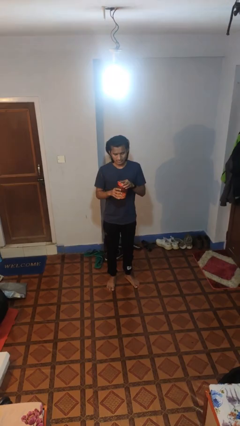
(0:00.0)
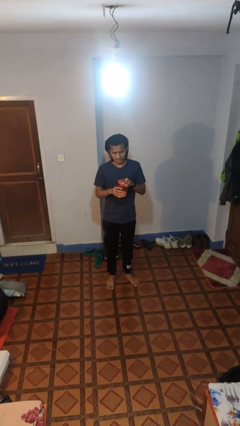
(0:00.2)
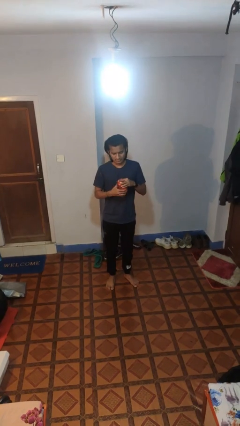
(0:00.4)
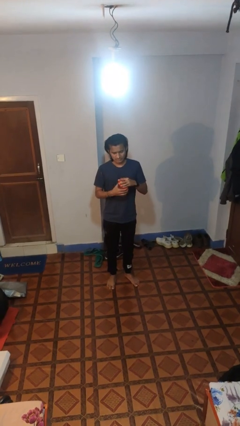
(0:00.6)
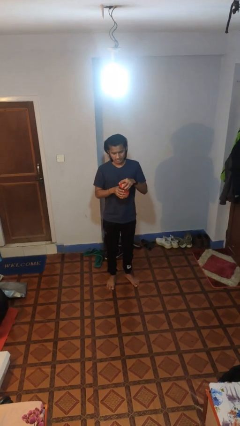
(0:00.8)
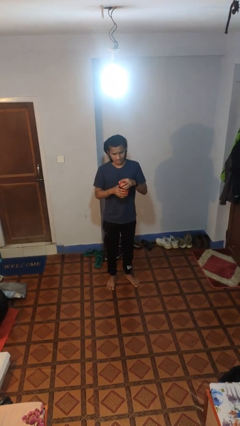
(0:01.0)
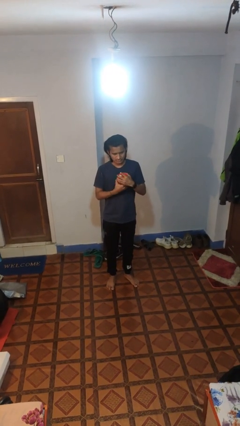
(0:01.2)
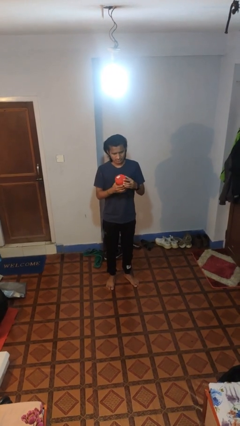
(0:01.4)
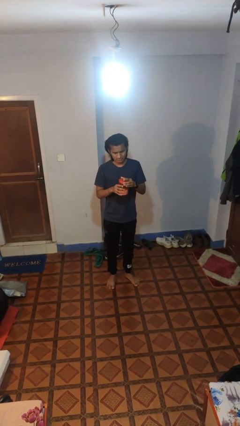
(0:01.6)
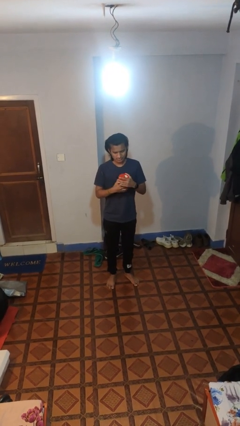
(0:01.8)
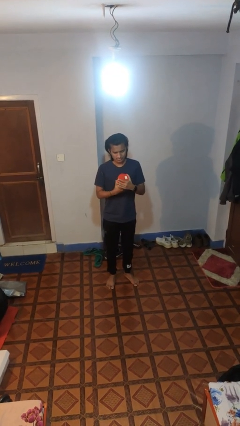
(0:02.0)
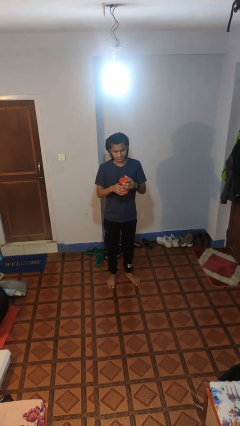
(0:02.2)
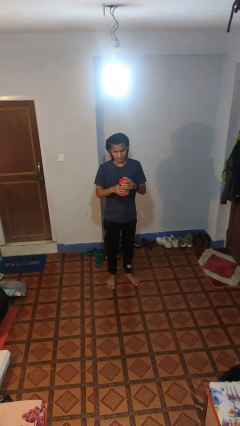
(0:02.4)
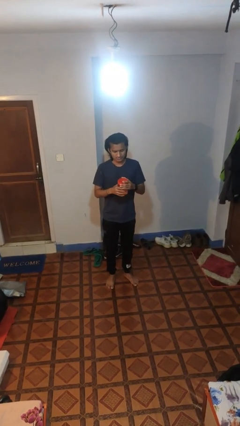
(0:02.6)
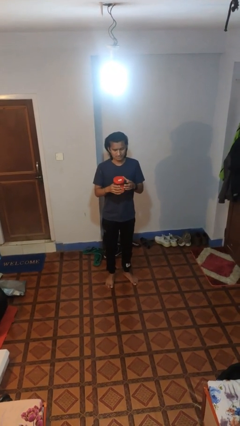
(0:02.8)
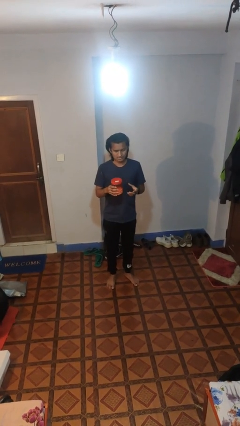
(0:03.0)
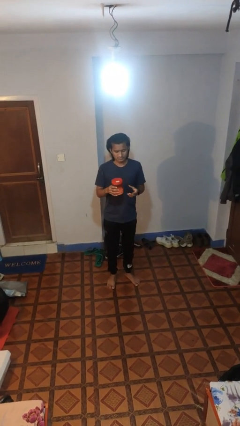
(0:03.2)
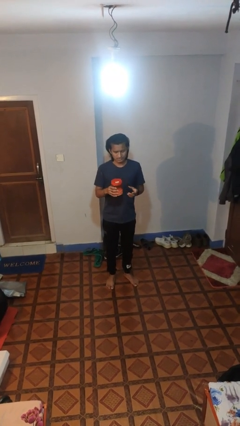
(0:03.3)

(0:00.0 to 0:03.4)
person closes jar

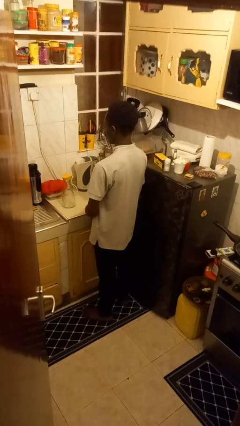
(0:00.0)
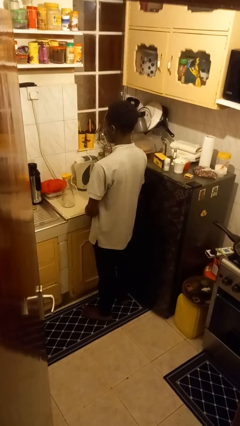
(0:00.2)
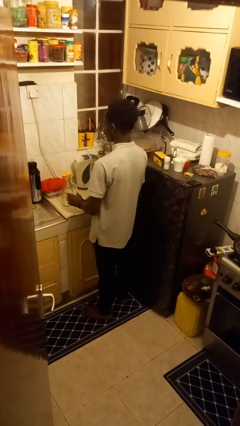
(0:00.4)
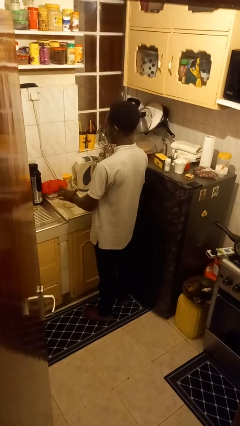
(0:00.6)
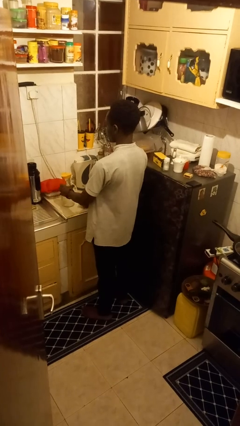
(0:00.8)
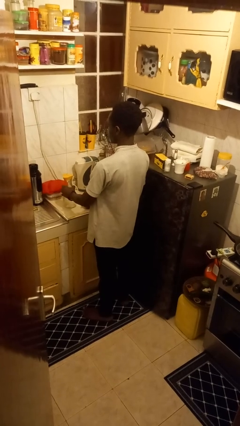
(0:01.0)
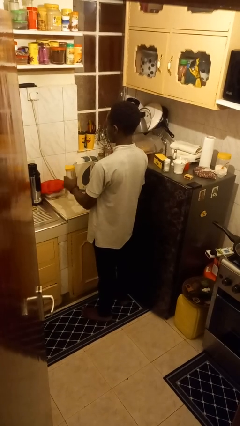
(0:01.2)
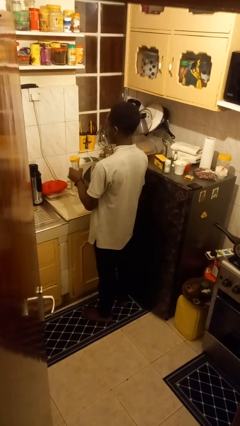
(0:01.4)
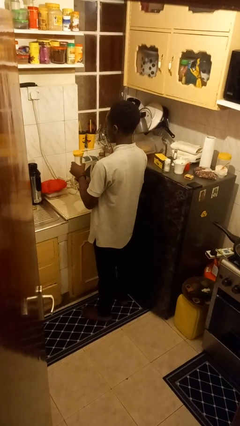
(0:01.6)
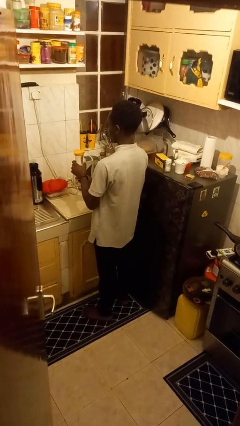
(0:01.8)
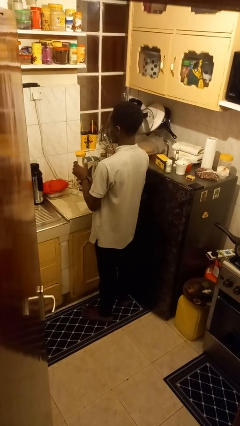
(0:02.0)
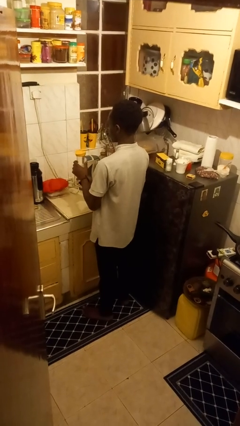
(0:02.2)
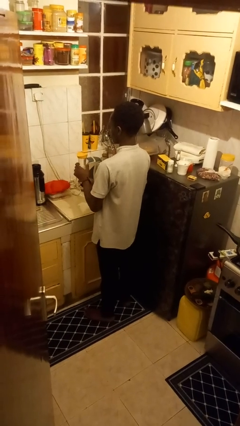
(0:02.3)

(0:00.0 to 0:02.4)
person picks up object from countertop

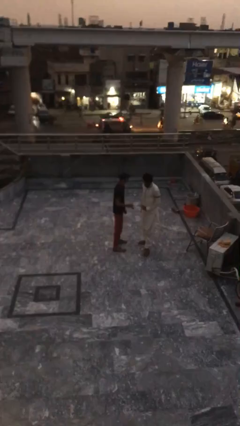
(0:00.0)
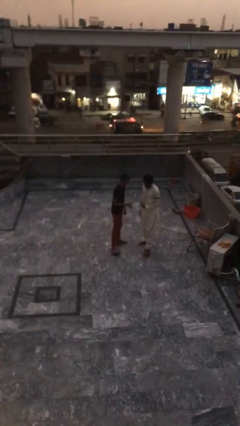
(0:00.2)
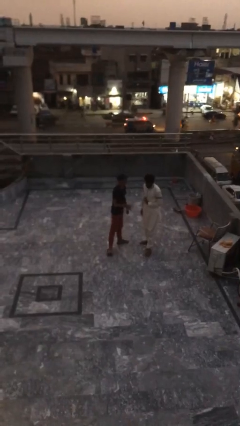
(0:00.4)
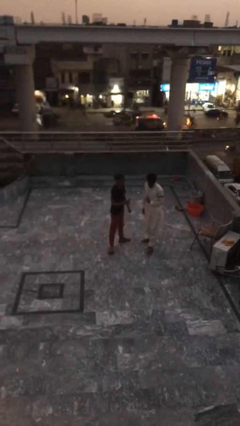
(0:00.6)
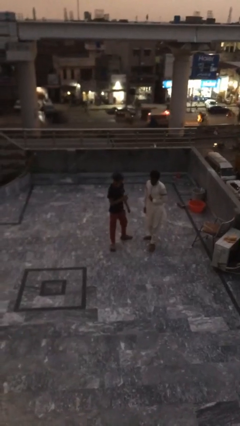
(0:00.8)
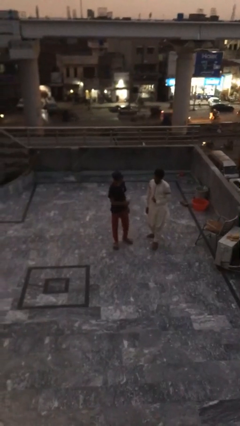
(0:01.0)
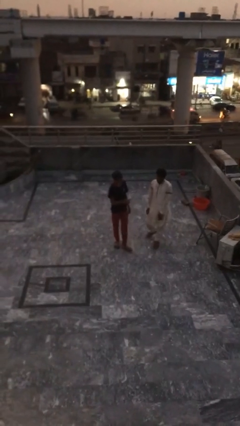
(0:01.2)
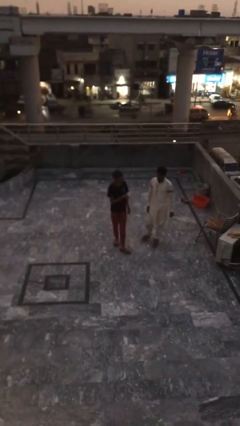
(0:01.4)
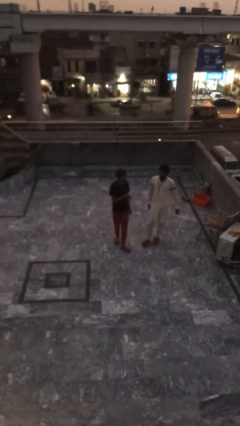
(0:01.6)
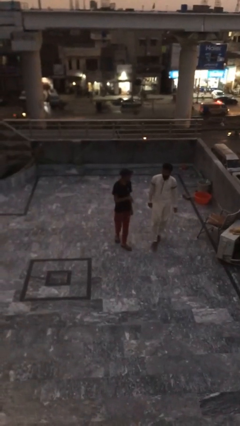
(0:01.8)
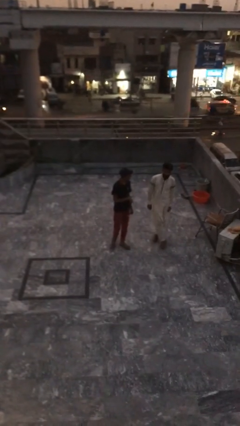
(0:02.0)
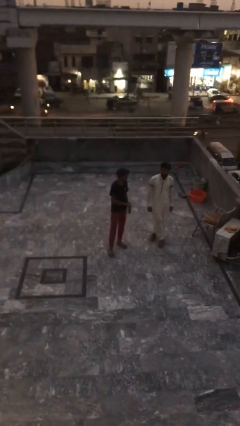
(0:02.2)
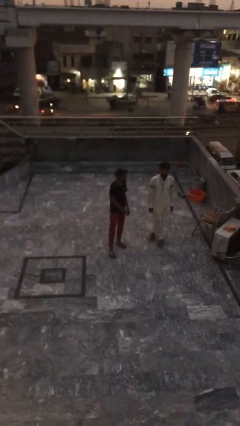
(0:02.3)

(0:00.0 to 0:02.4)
person talks to person

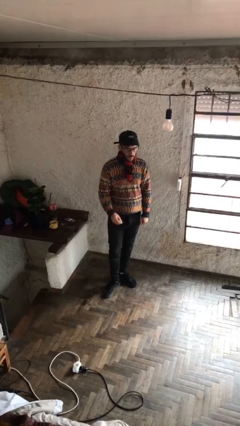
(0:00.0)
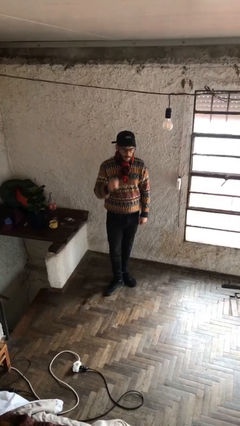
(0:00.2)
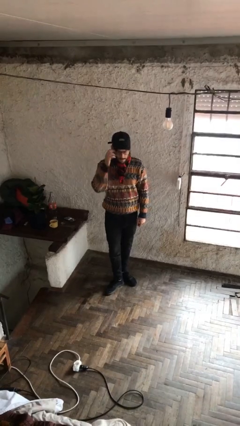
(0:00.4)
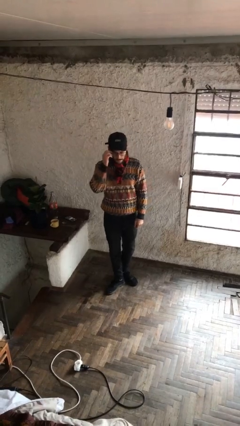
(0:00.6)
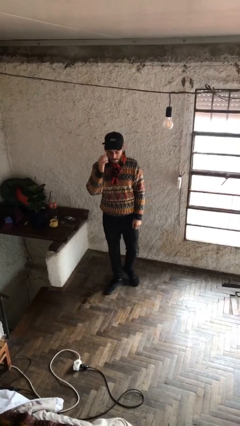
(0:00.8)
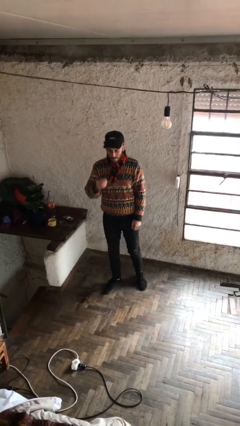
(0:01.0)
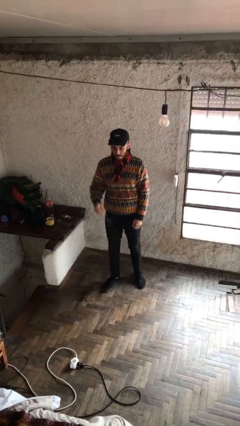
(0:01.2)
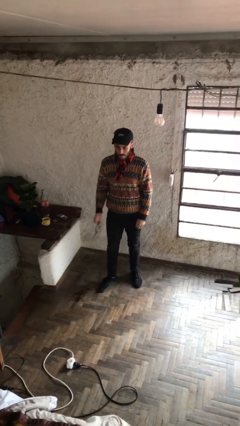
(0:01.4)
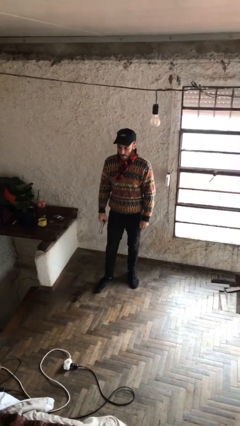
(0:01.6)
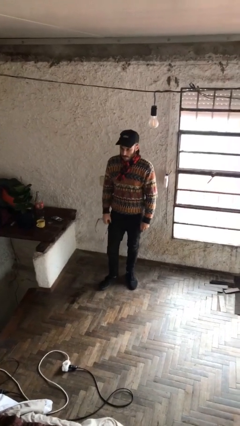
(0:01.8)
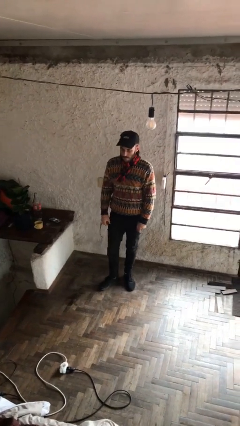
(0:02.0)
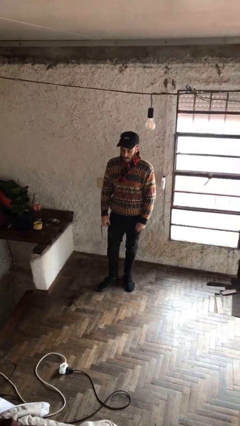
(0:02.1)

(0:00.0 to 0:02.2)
person takes off glasses

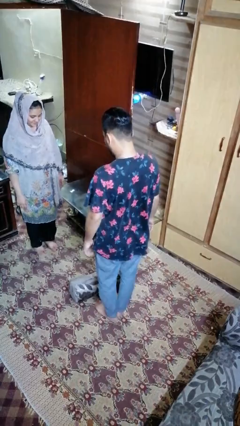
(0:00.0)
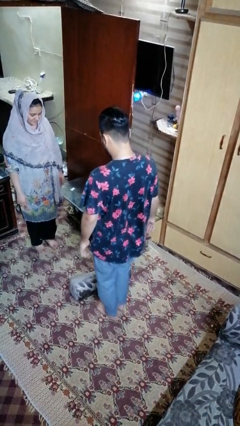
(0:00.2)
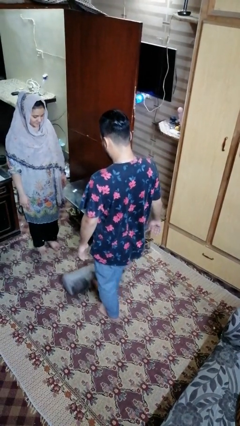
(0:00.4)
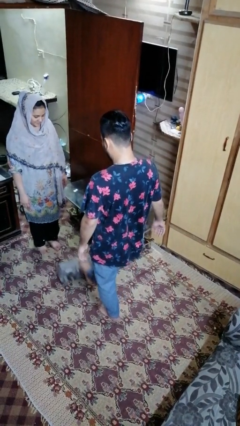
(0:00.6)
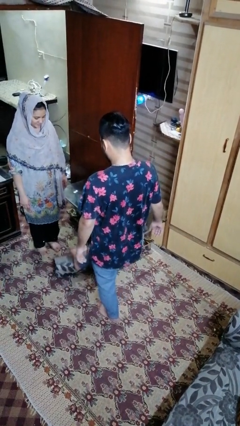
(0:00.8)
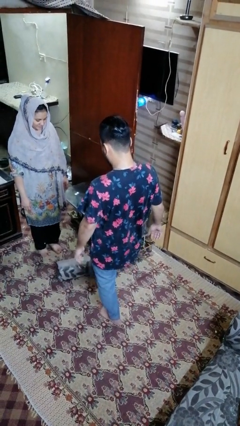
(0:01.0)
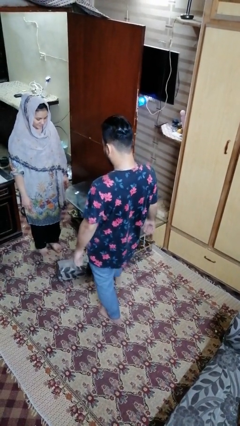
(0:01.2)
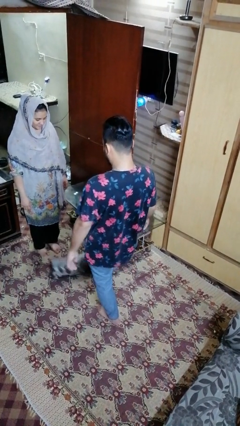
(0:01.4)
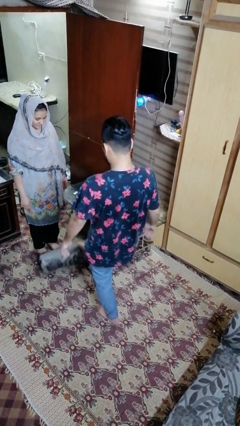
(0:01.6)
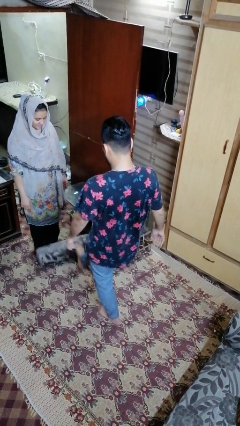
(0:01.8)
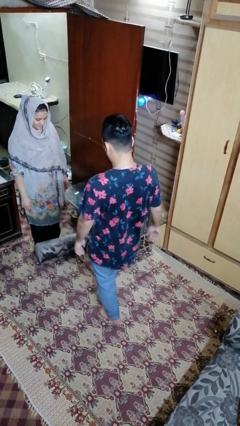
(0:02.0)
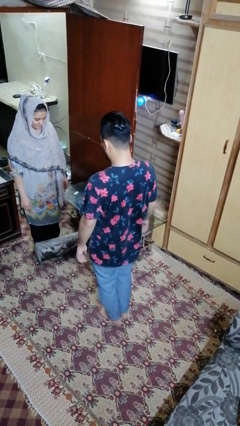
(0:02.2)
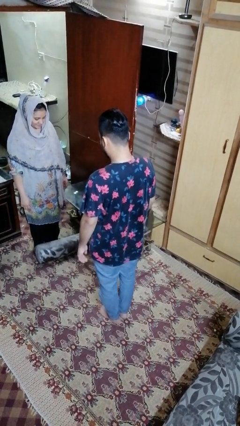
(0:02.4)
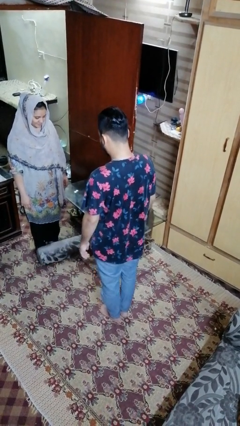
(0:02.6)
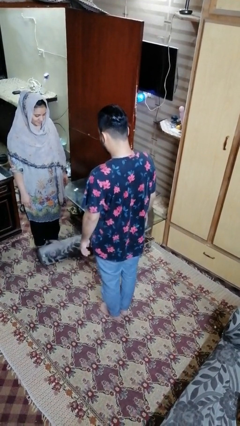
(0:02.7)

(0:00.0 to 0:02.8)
person kicks object to person

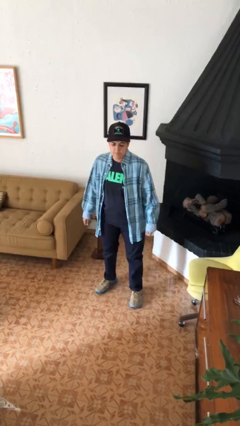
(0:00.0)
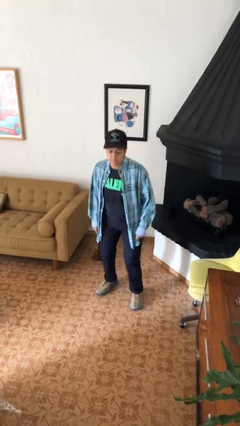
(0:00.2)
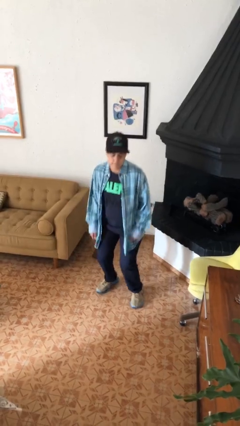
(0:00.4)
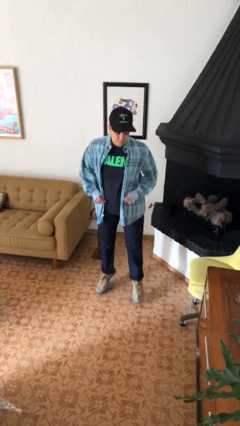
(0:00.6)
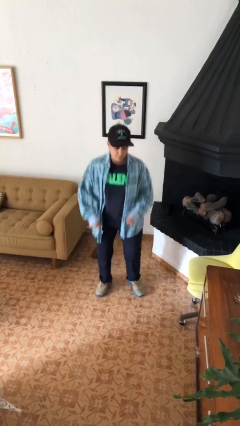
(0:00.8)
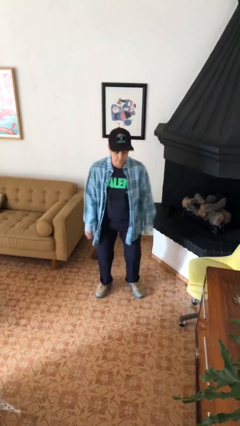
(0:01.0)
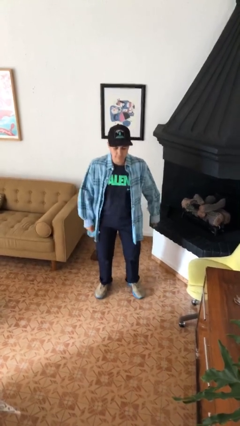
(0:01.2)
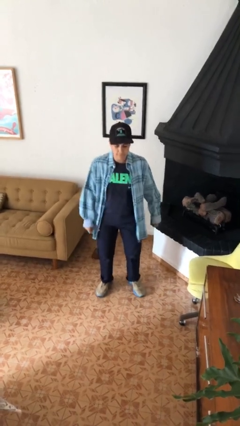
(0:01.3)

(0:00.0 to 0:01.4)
person jumps

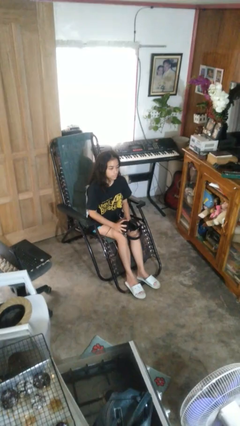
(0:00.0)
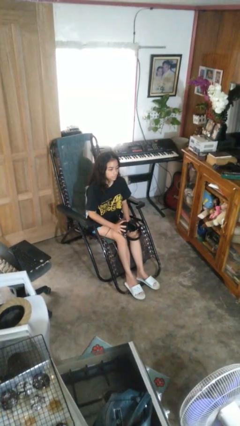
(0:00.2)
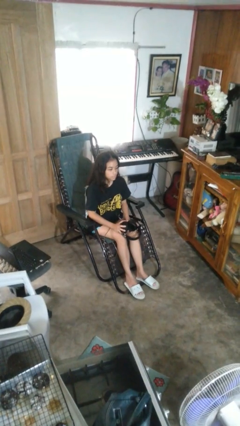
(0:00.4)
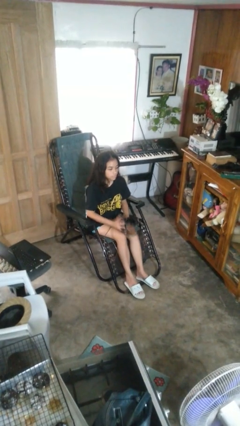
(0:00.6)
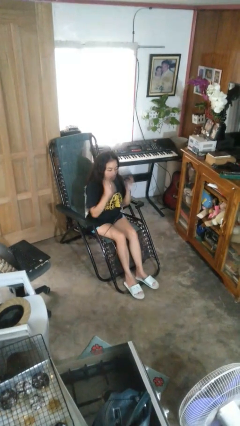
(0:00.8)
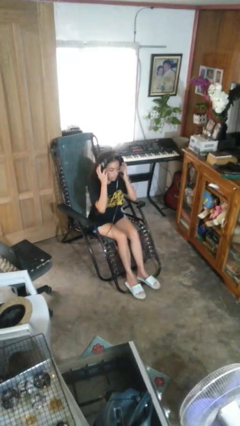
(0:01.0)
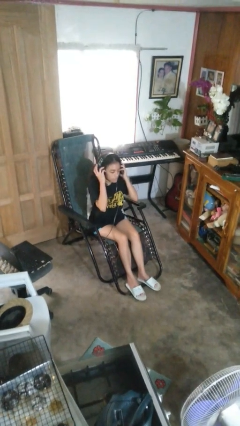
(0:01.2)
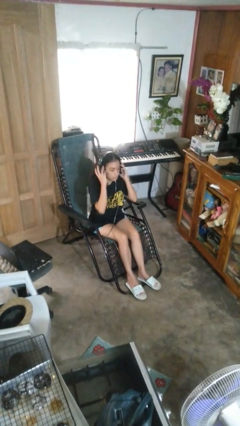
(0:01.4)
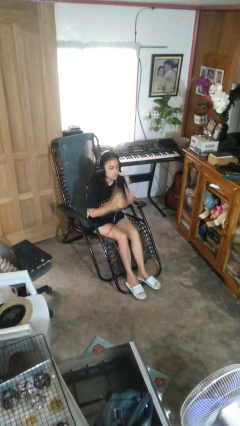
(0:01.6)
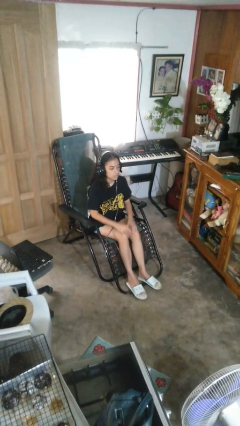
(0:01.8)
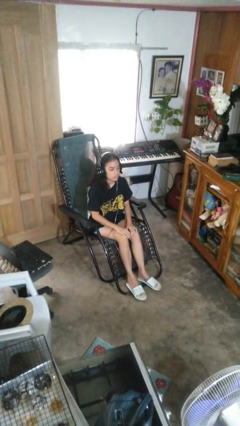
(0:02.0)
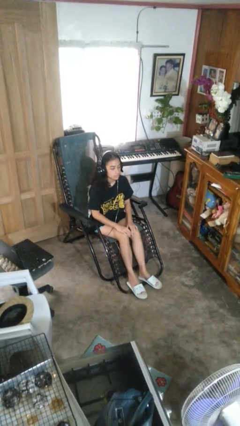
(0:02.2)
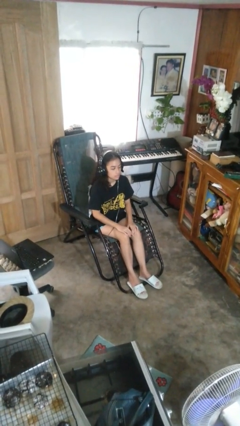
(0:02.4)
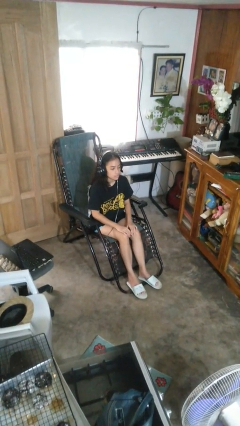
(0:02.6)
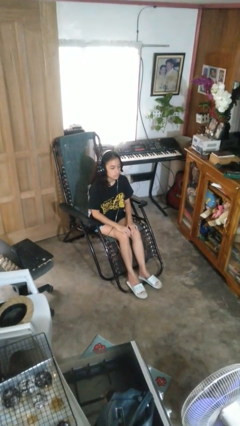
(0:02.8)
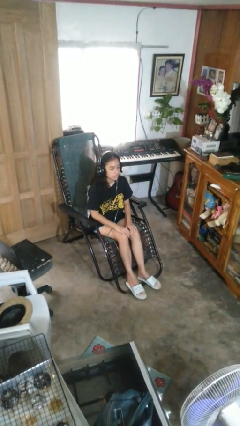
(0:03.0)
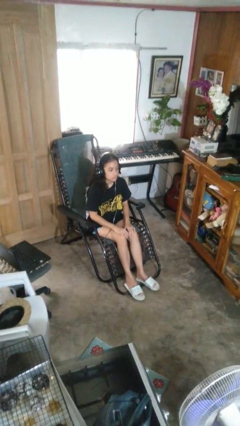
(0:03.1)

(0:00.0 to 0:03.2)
person puts on headphones
